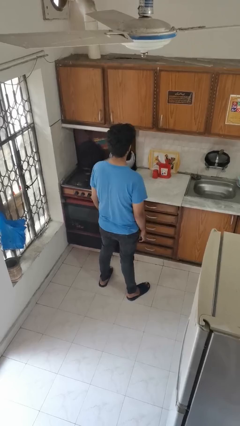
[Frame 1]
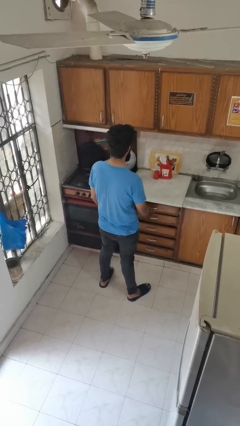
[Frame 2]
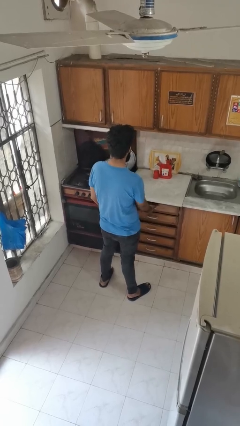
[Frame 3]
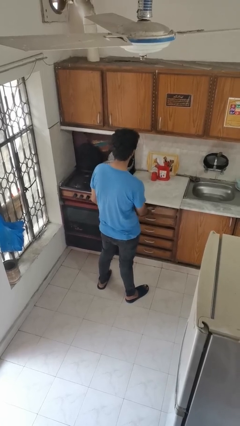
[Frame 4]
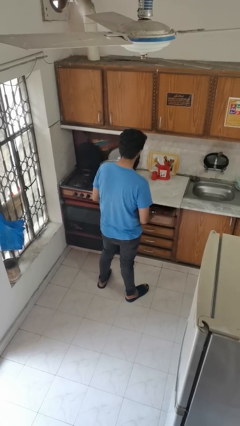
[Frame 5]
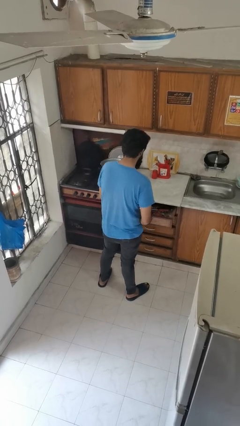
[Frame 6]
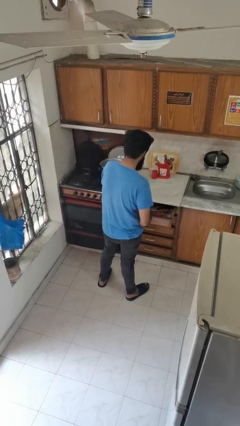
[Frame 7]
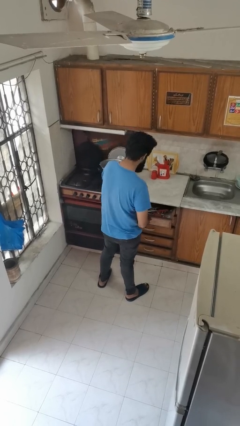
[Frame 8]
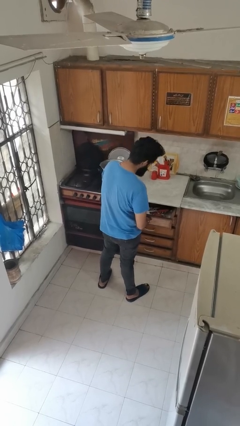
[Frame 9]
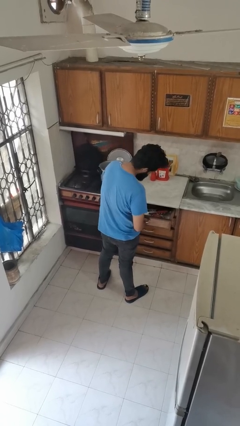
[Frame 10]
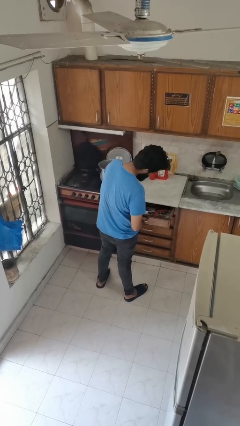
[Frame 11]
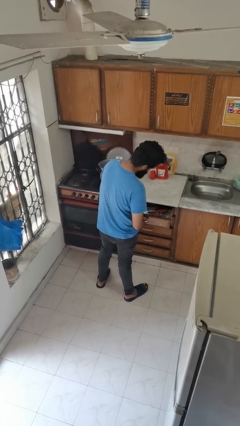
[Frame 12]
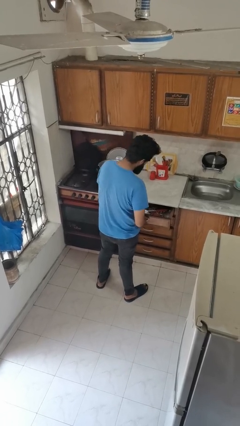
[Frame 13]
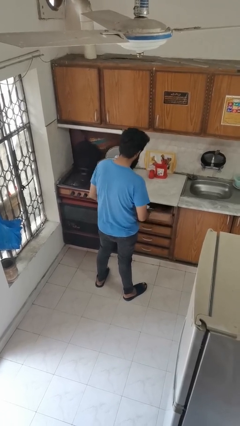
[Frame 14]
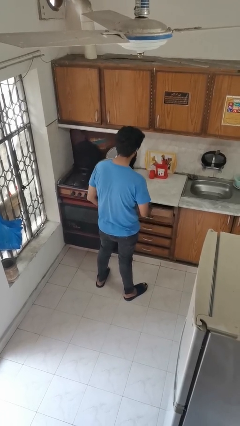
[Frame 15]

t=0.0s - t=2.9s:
person searches in kitchen drawer

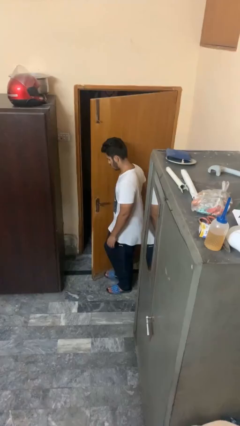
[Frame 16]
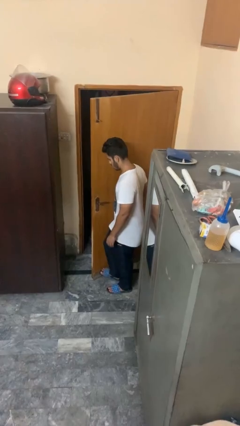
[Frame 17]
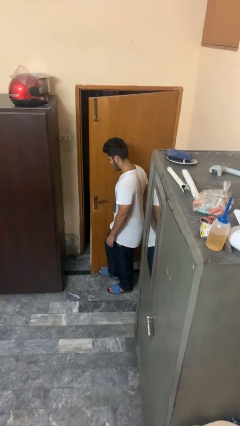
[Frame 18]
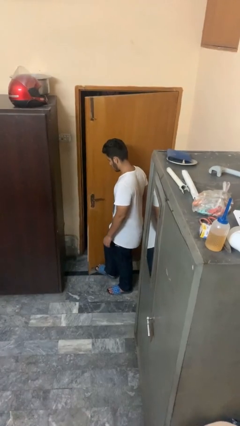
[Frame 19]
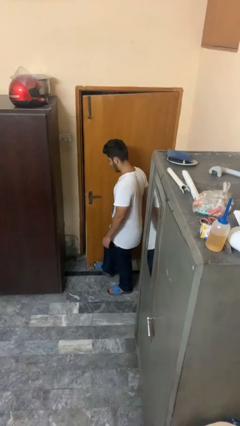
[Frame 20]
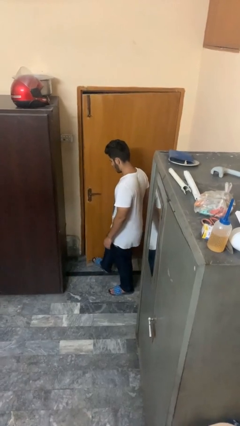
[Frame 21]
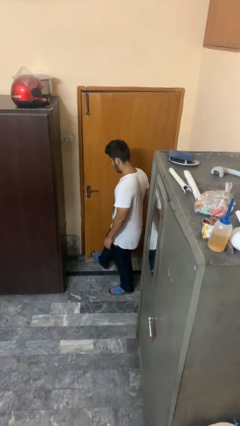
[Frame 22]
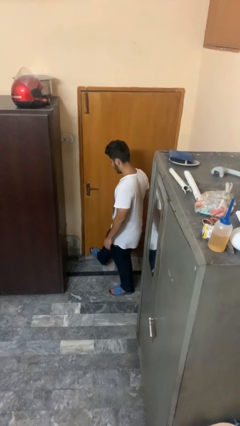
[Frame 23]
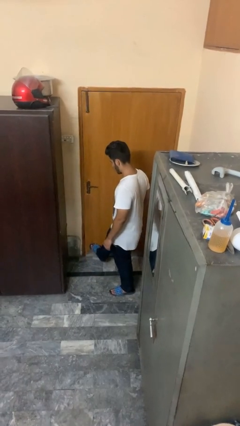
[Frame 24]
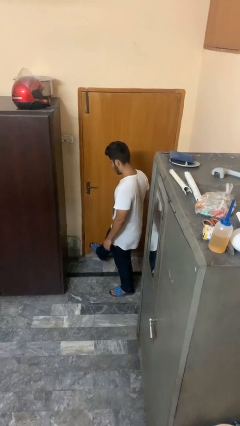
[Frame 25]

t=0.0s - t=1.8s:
person closes door with foot

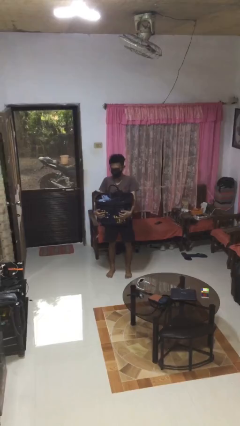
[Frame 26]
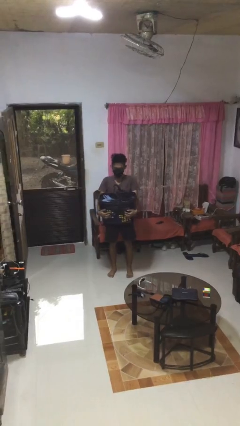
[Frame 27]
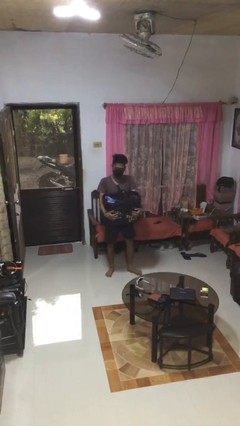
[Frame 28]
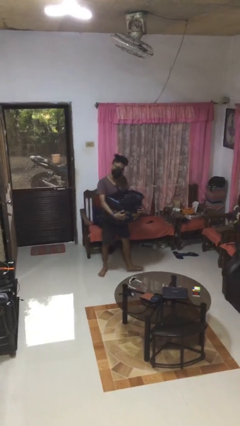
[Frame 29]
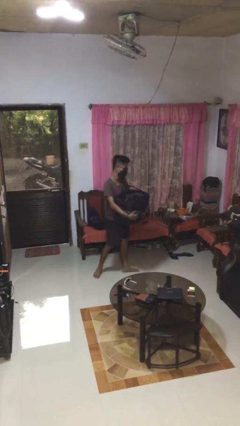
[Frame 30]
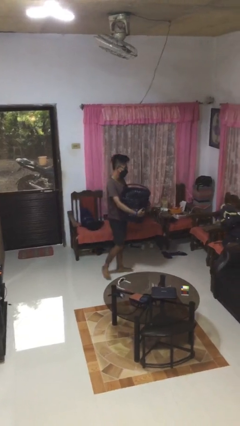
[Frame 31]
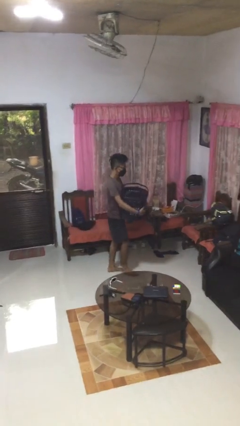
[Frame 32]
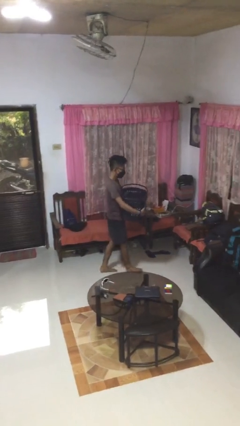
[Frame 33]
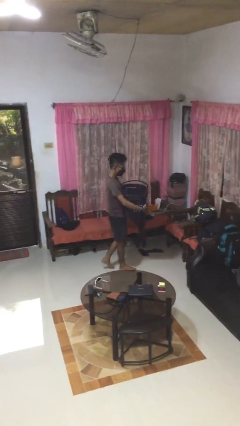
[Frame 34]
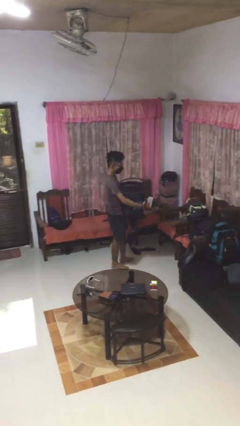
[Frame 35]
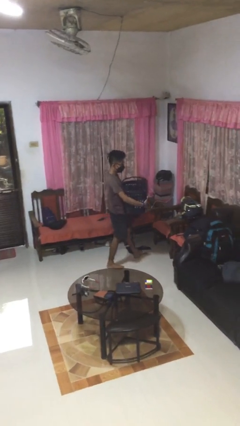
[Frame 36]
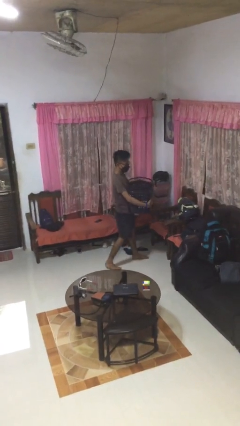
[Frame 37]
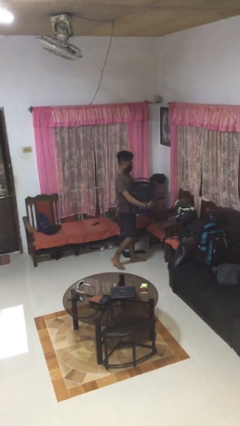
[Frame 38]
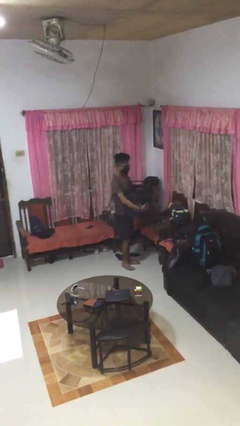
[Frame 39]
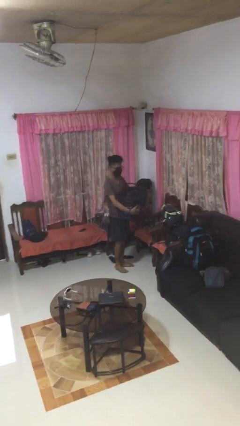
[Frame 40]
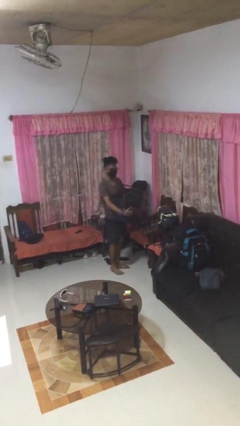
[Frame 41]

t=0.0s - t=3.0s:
person carries laundry basket

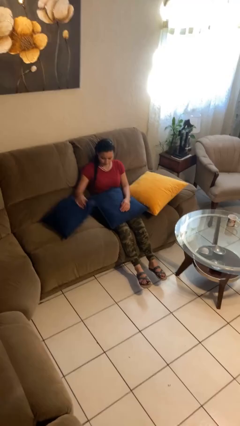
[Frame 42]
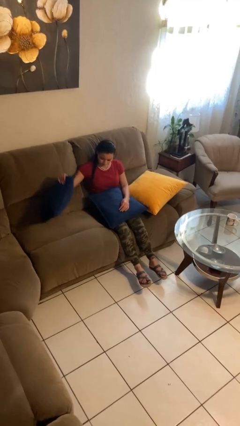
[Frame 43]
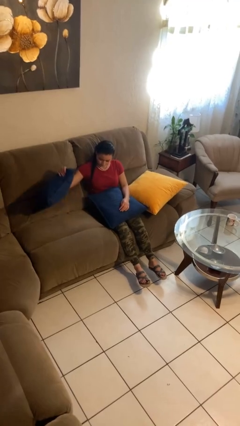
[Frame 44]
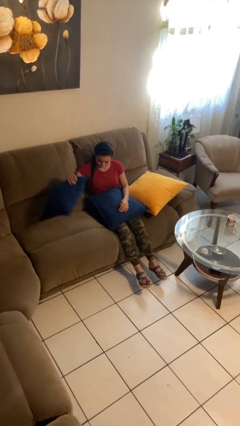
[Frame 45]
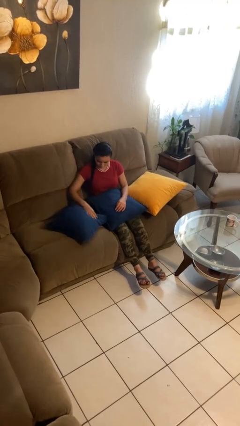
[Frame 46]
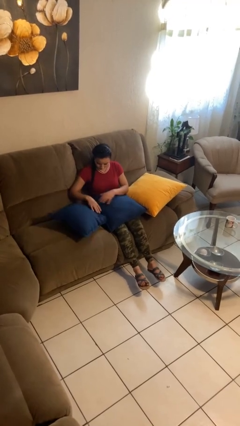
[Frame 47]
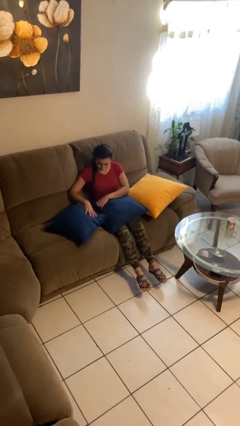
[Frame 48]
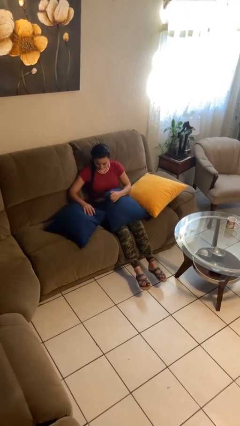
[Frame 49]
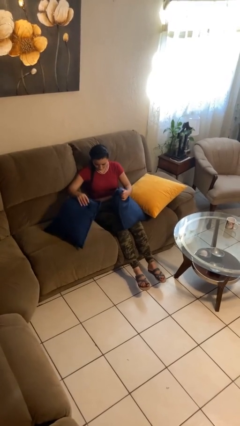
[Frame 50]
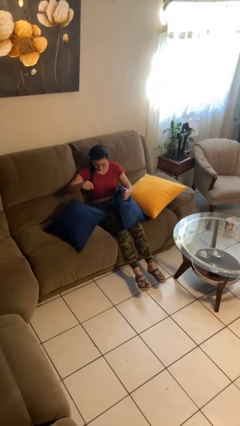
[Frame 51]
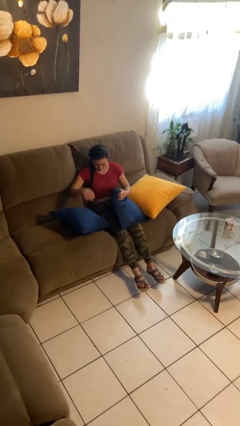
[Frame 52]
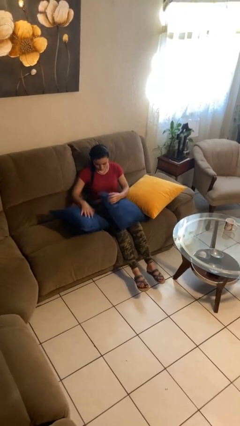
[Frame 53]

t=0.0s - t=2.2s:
person searches in couch

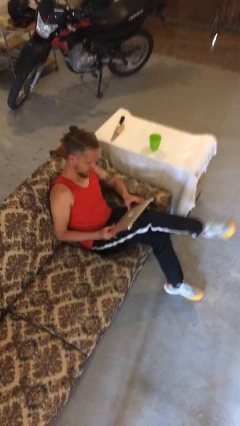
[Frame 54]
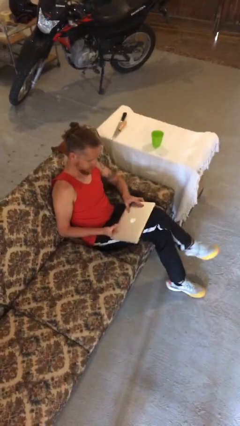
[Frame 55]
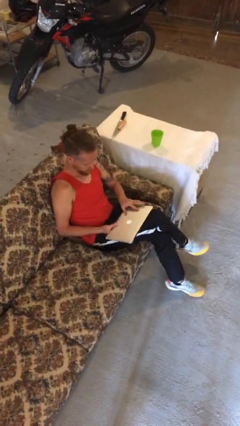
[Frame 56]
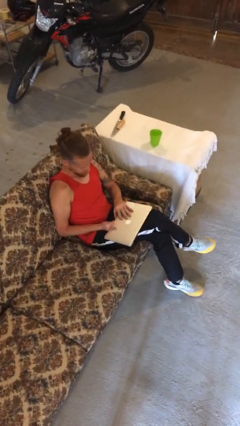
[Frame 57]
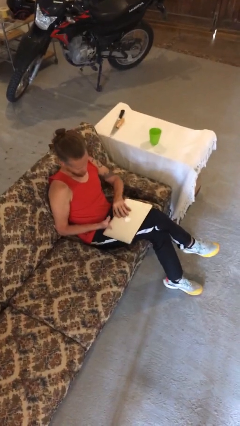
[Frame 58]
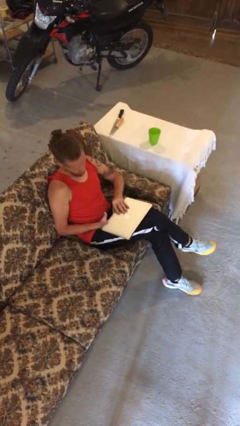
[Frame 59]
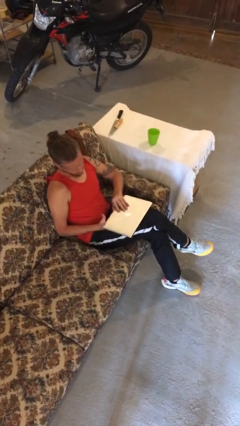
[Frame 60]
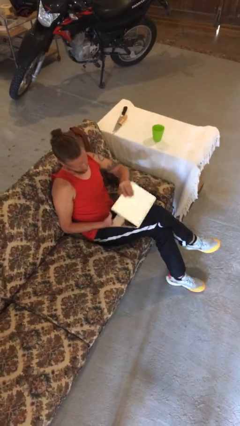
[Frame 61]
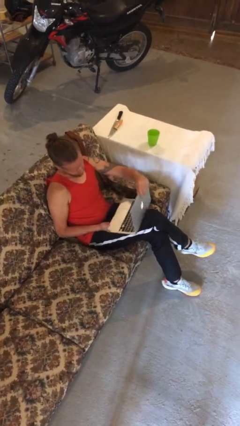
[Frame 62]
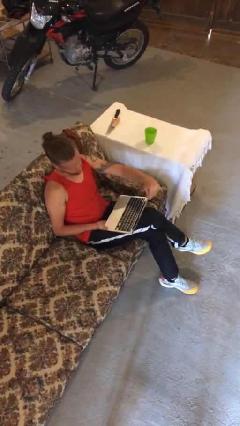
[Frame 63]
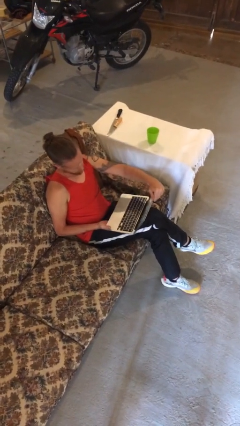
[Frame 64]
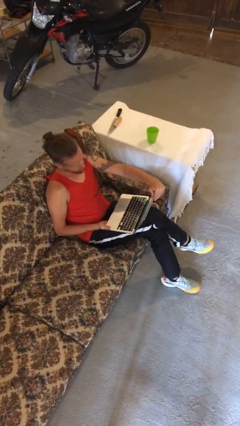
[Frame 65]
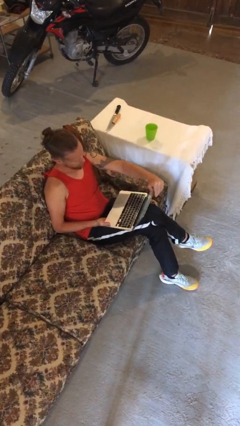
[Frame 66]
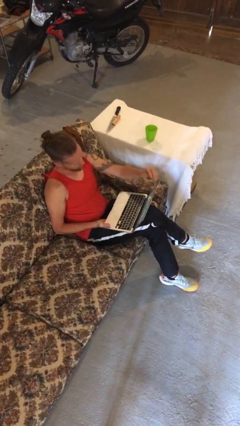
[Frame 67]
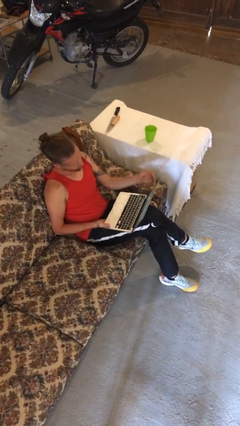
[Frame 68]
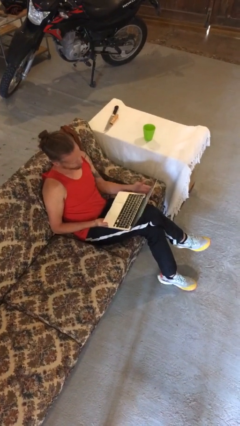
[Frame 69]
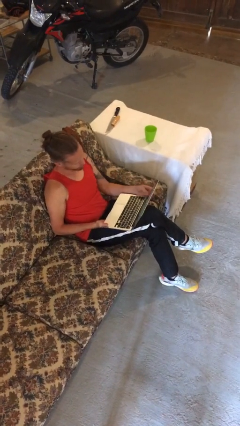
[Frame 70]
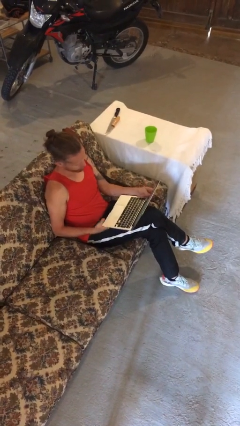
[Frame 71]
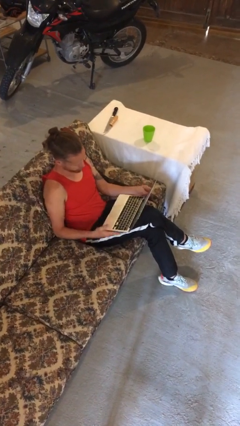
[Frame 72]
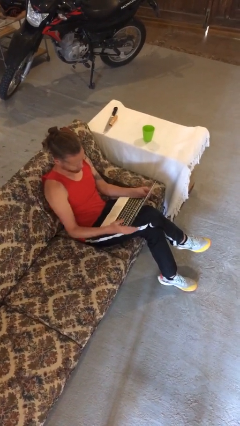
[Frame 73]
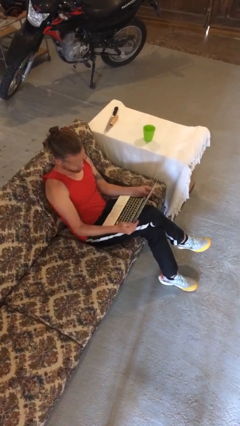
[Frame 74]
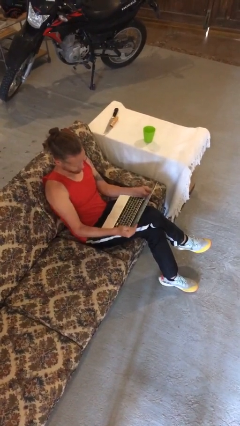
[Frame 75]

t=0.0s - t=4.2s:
person opens laptop

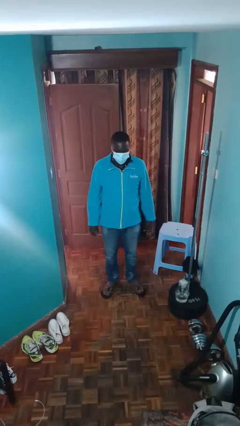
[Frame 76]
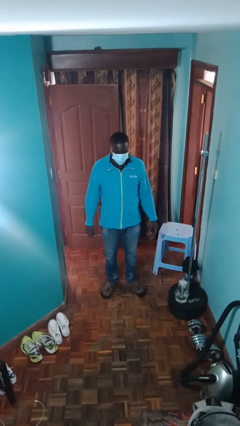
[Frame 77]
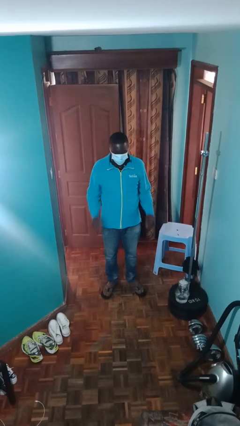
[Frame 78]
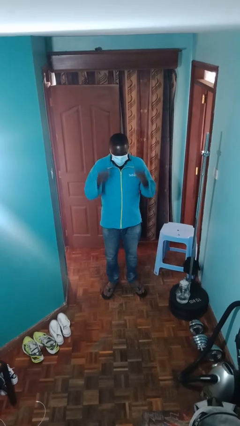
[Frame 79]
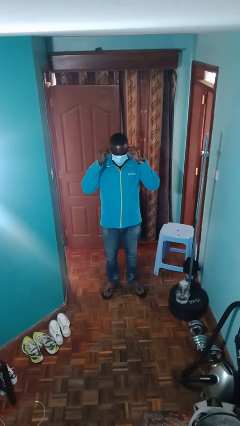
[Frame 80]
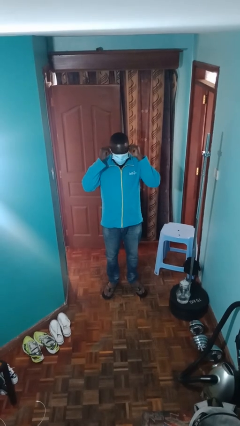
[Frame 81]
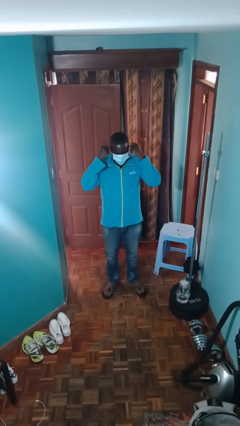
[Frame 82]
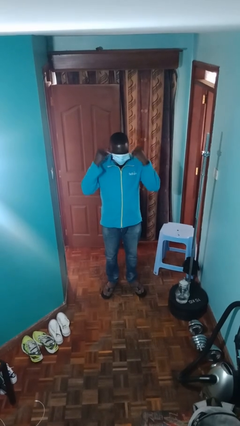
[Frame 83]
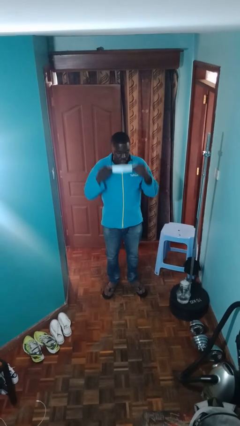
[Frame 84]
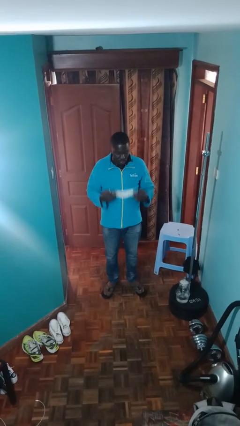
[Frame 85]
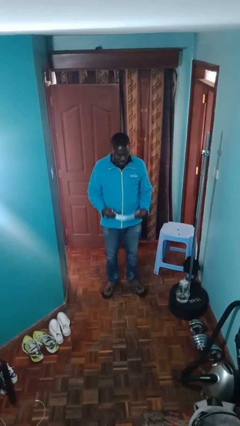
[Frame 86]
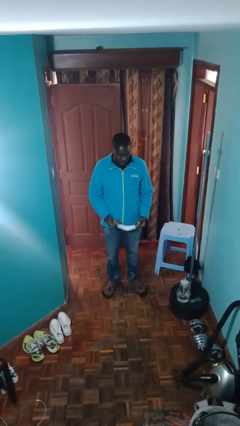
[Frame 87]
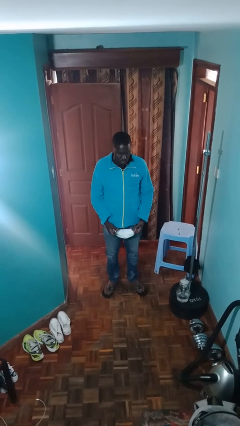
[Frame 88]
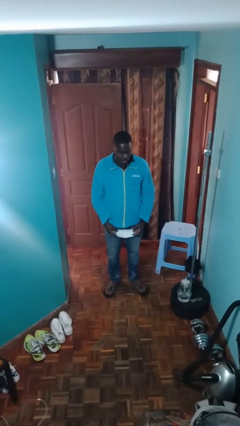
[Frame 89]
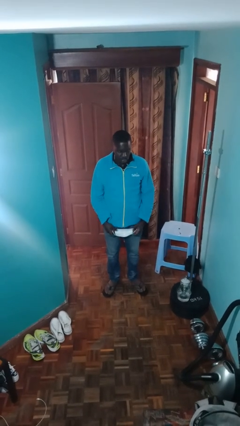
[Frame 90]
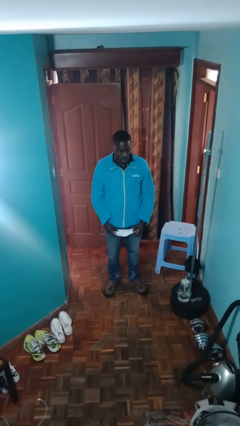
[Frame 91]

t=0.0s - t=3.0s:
person takes off facemask

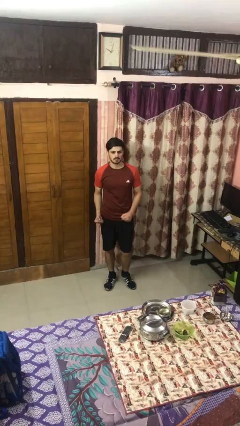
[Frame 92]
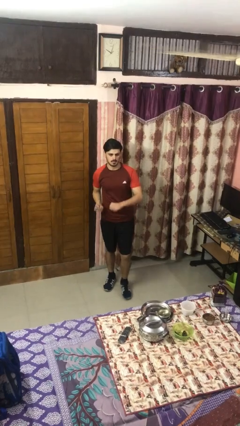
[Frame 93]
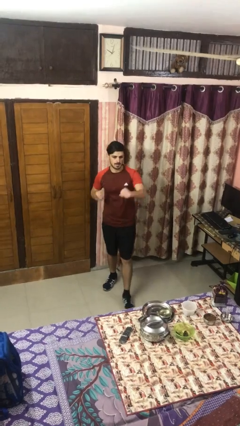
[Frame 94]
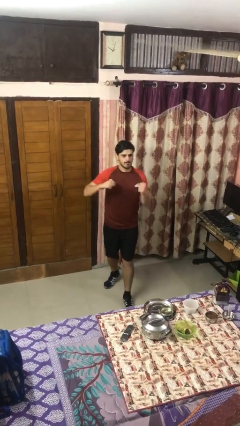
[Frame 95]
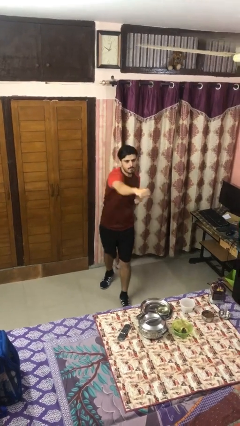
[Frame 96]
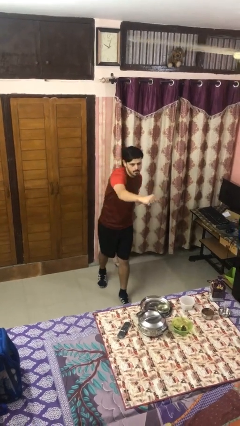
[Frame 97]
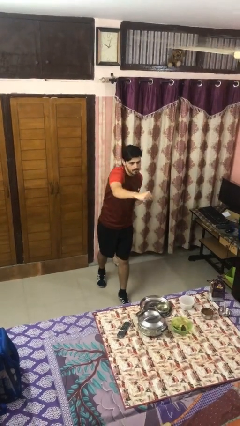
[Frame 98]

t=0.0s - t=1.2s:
person punches
